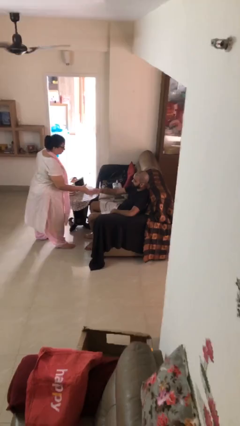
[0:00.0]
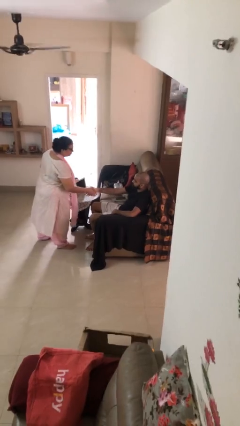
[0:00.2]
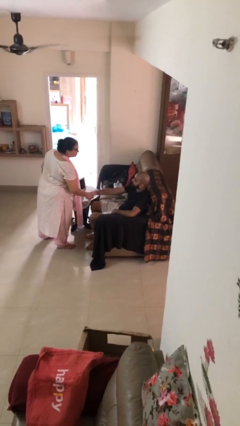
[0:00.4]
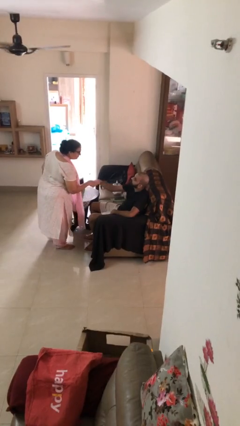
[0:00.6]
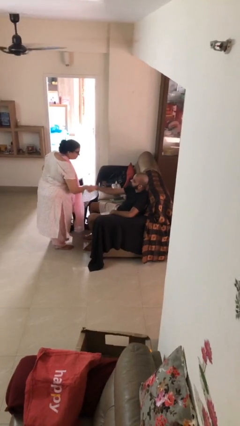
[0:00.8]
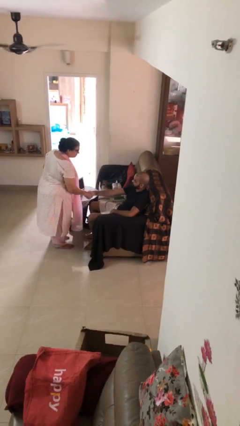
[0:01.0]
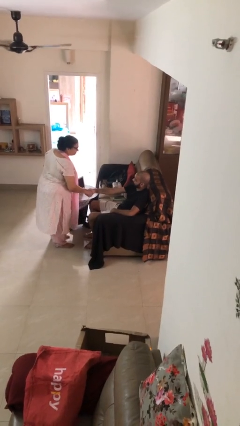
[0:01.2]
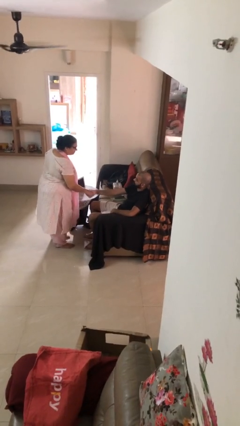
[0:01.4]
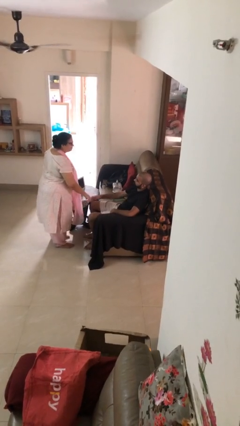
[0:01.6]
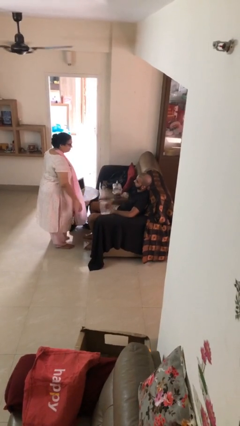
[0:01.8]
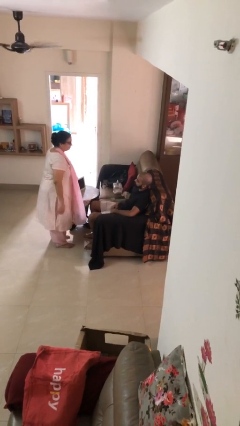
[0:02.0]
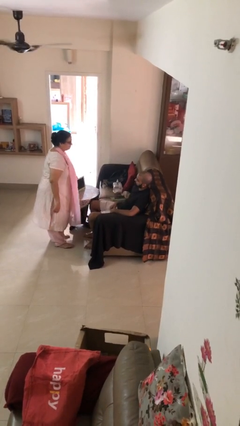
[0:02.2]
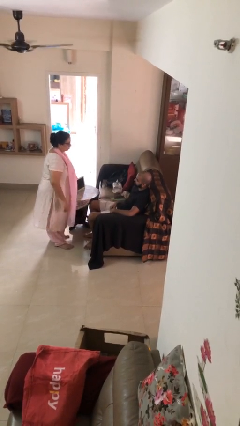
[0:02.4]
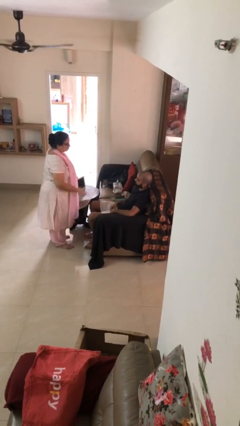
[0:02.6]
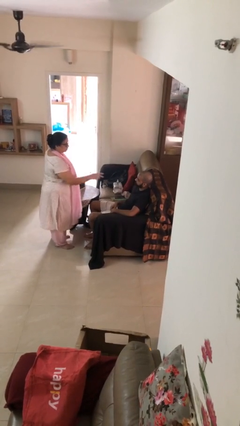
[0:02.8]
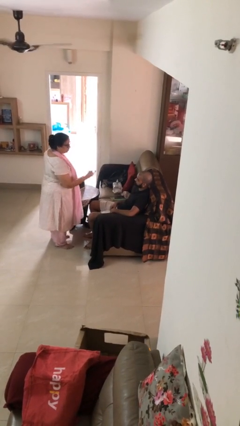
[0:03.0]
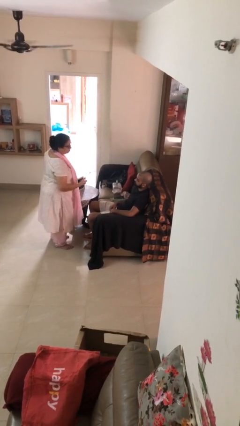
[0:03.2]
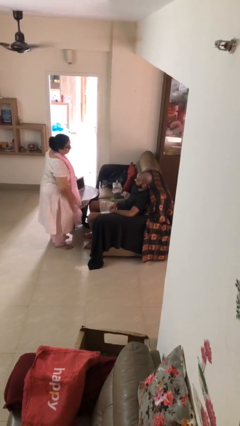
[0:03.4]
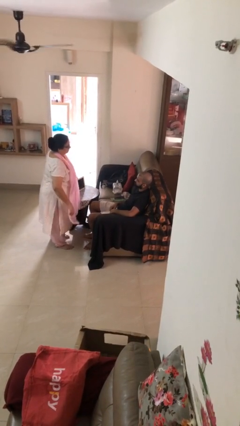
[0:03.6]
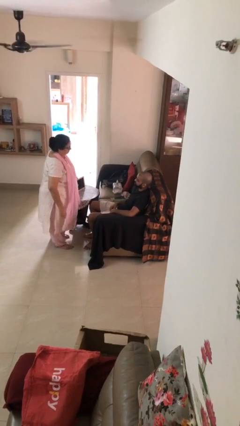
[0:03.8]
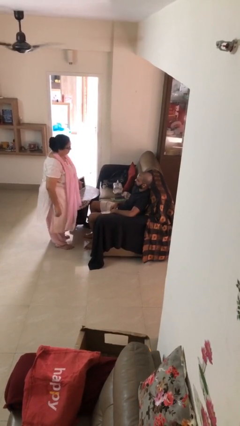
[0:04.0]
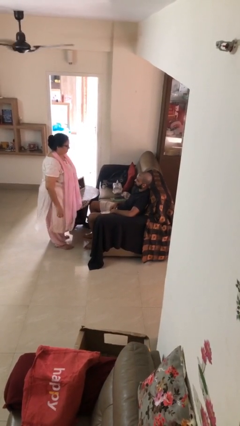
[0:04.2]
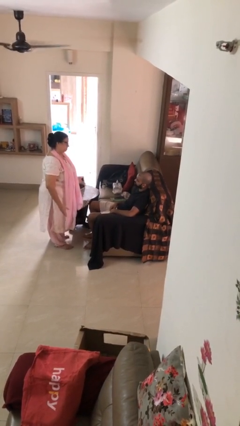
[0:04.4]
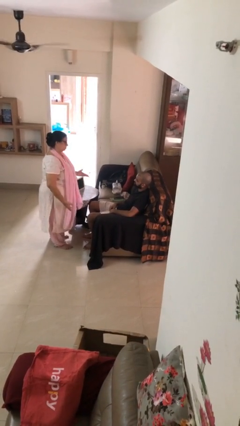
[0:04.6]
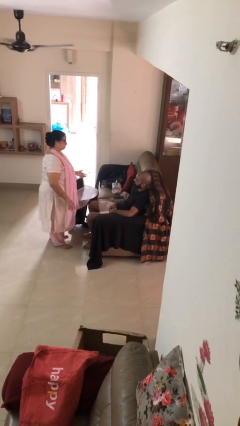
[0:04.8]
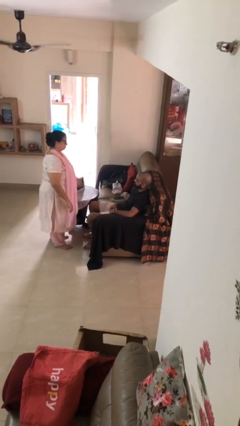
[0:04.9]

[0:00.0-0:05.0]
person shakes hand

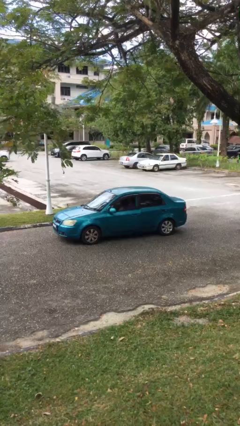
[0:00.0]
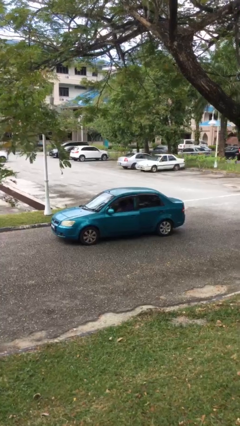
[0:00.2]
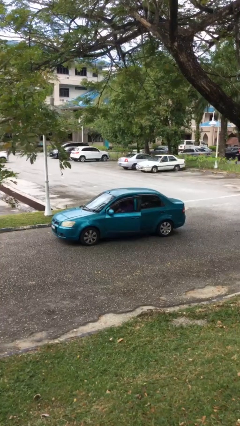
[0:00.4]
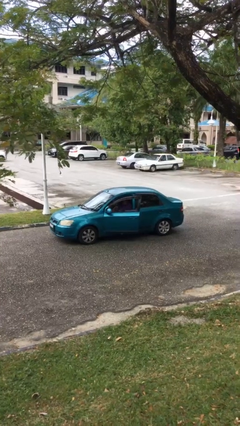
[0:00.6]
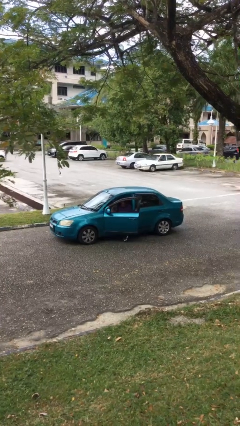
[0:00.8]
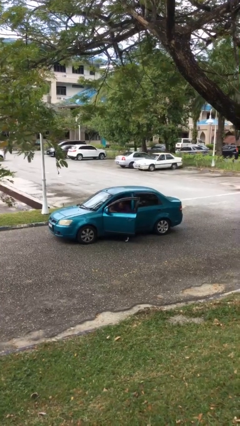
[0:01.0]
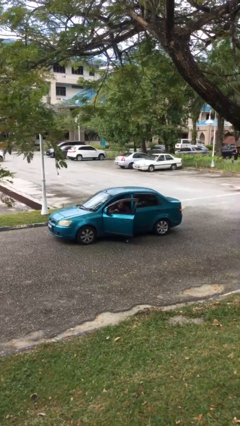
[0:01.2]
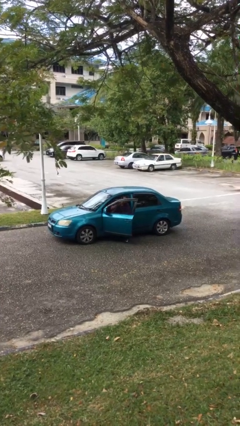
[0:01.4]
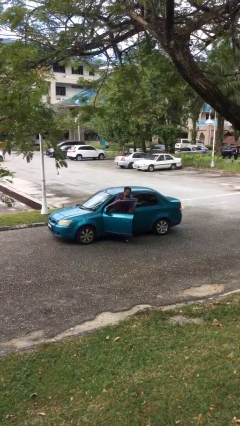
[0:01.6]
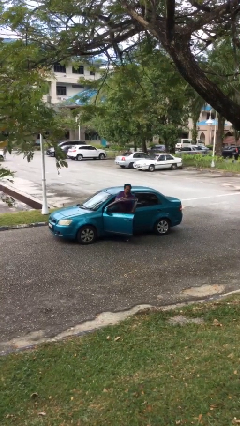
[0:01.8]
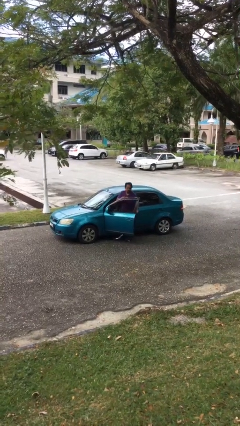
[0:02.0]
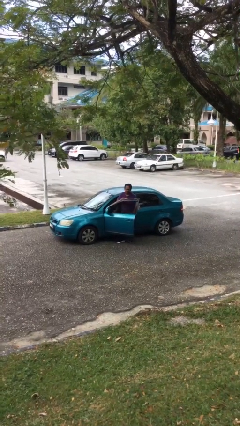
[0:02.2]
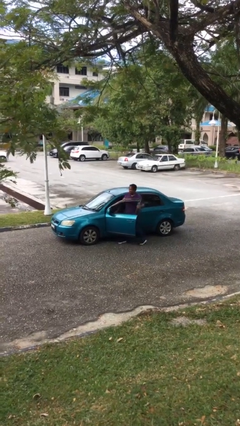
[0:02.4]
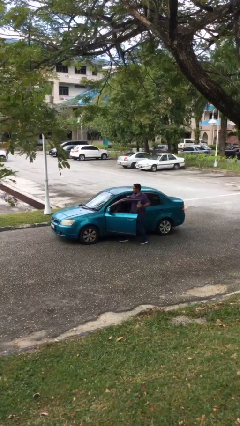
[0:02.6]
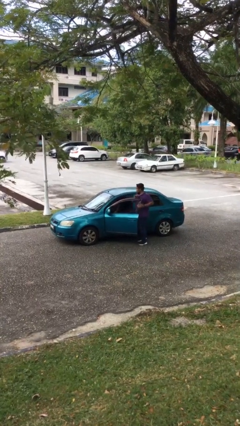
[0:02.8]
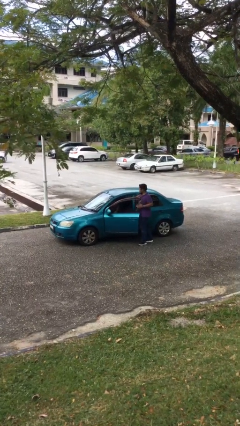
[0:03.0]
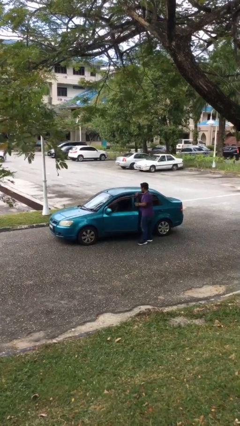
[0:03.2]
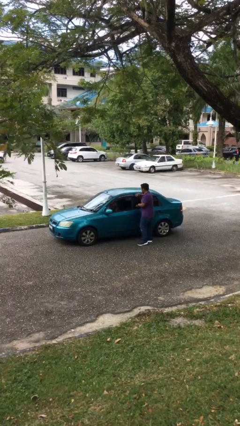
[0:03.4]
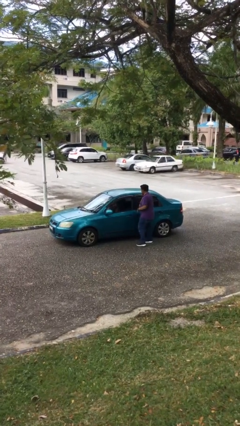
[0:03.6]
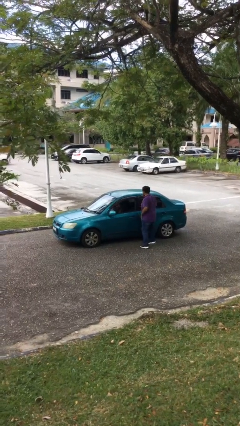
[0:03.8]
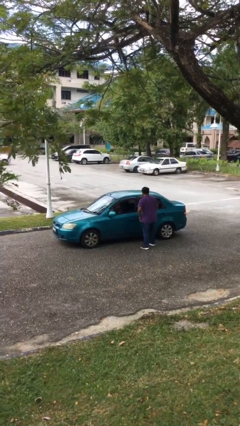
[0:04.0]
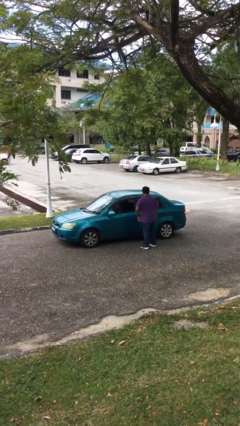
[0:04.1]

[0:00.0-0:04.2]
car drops off person

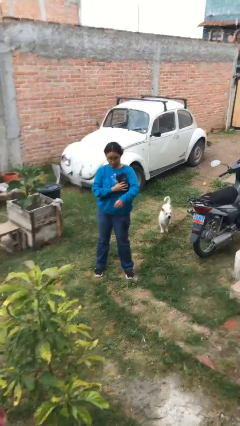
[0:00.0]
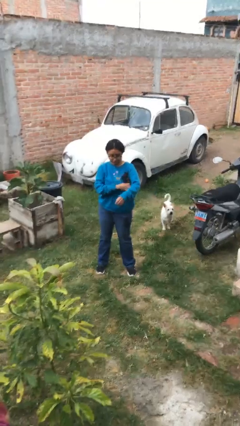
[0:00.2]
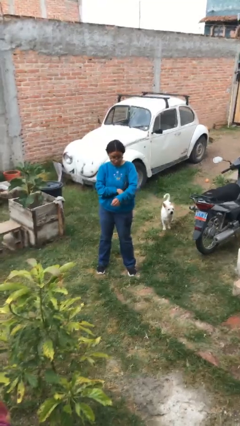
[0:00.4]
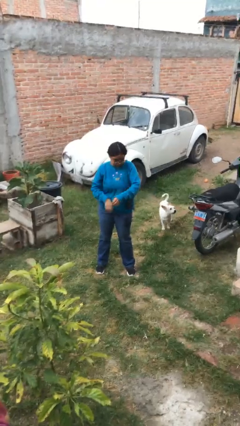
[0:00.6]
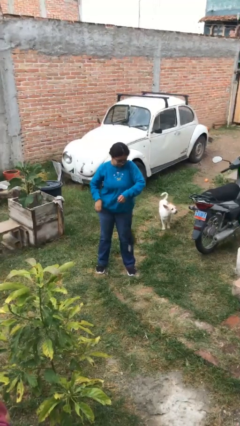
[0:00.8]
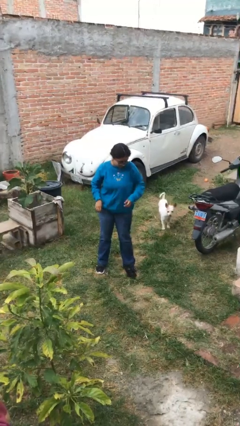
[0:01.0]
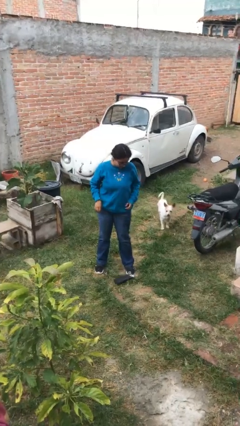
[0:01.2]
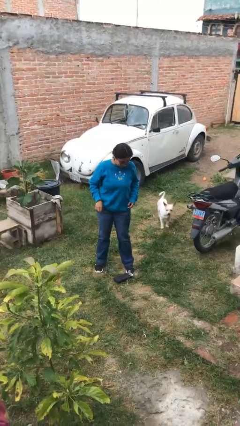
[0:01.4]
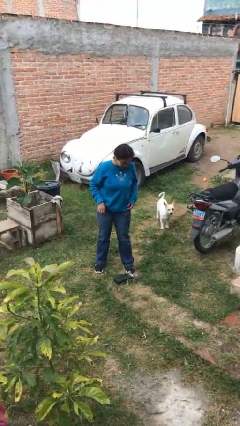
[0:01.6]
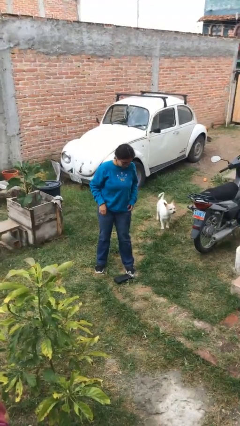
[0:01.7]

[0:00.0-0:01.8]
person drops object

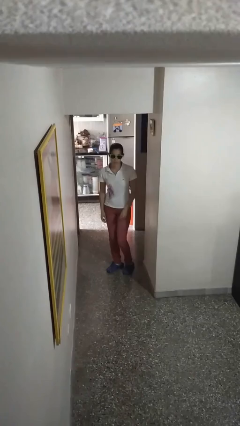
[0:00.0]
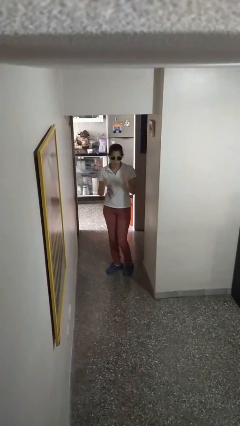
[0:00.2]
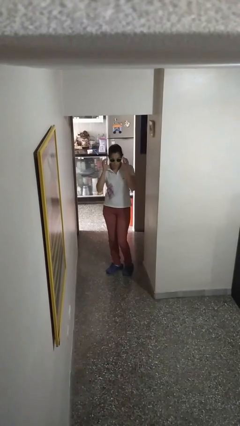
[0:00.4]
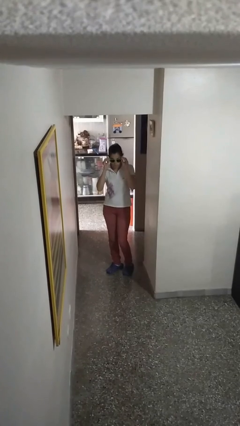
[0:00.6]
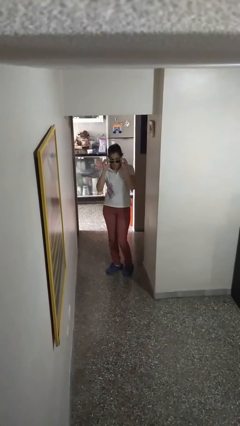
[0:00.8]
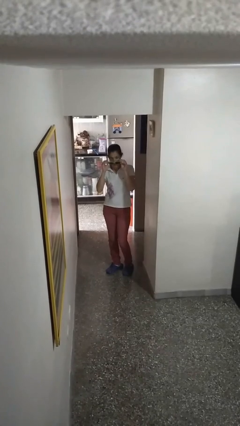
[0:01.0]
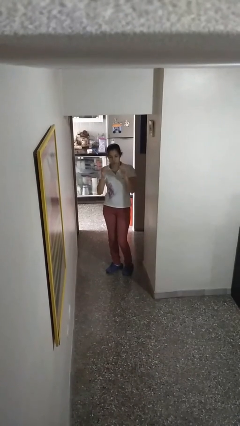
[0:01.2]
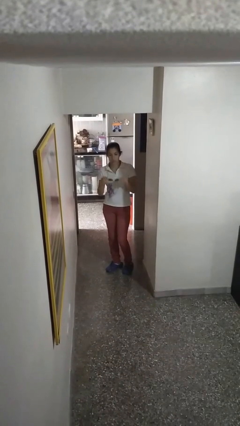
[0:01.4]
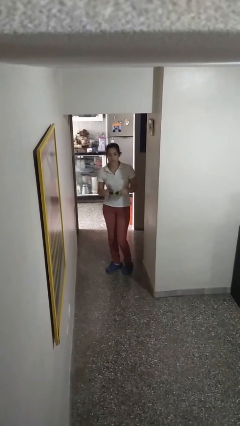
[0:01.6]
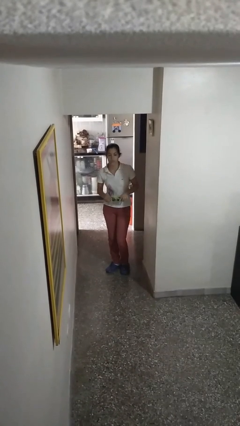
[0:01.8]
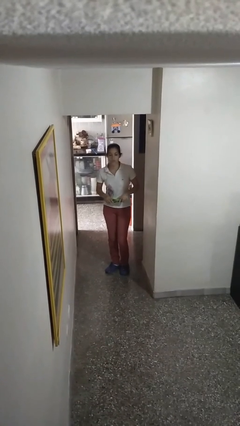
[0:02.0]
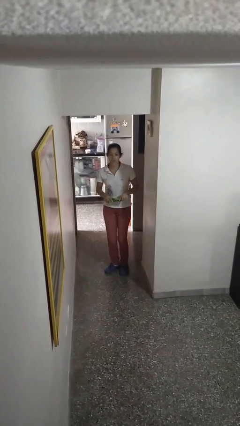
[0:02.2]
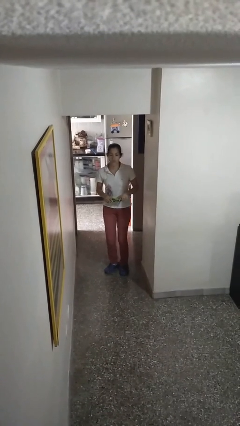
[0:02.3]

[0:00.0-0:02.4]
person takes off sunglasses

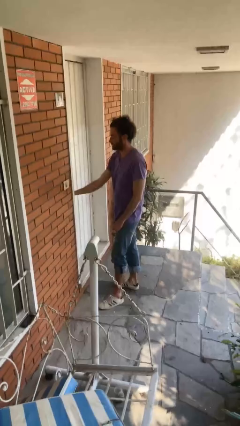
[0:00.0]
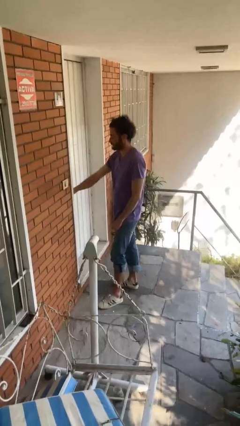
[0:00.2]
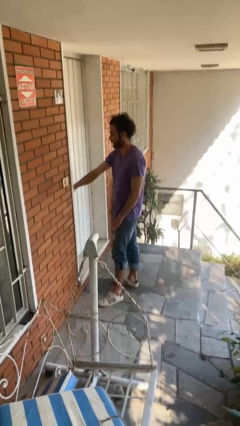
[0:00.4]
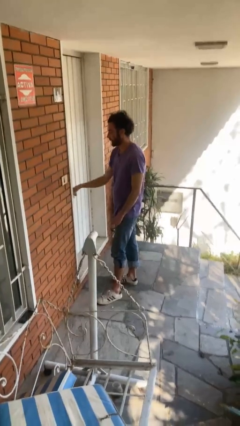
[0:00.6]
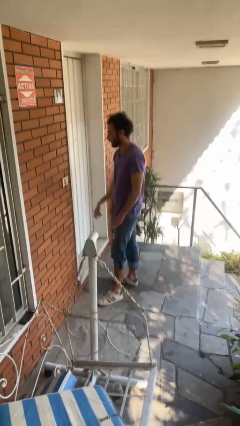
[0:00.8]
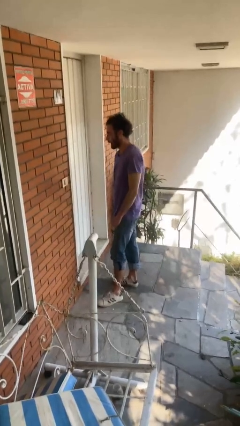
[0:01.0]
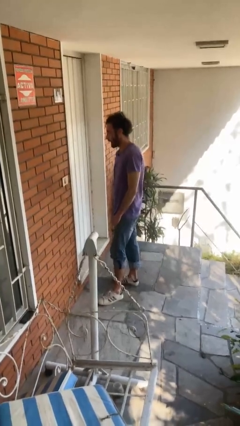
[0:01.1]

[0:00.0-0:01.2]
person locks door with keys

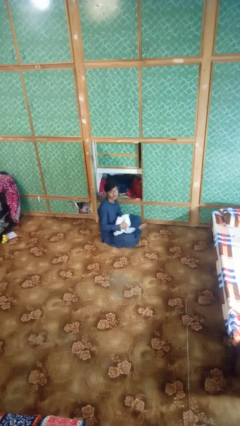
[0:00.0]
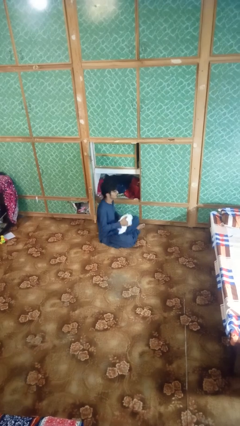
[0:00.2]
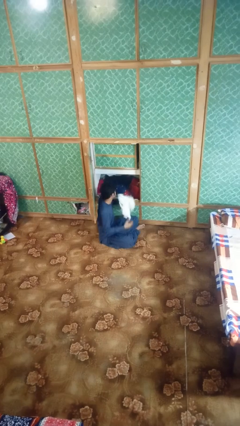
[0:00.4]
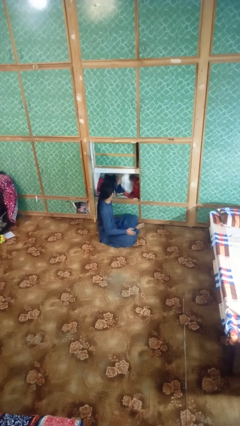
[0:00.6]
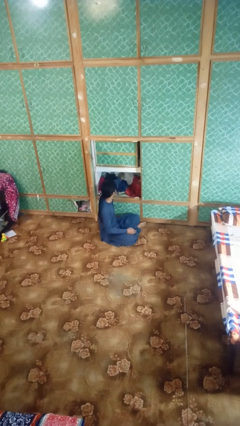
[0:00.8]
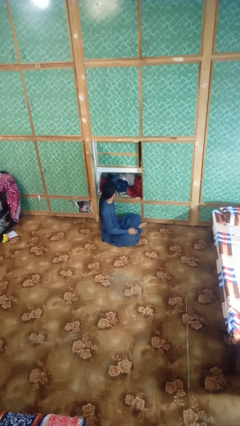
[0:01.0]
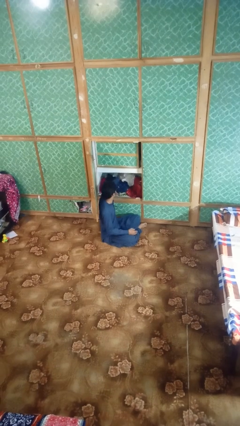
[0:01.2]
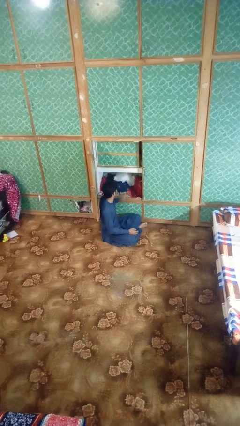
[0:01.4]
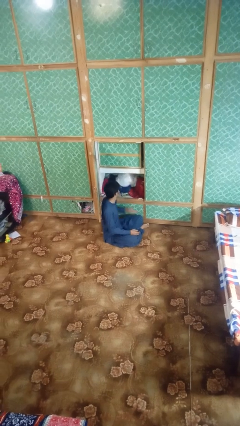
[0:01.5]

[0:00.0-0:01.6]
person puts clothes into dresser

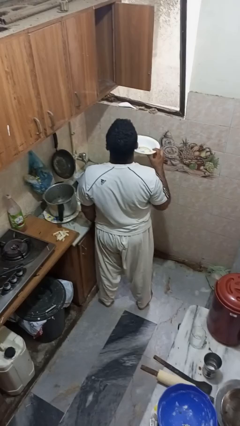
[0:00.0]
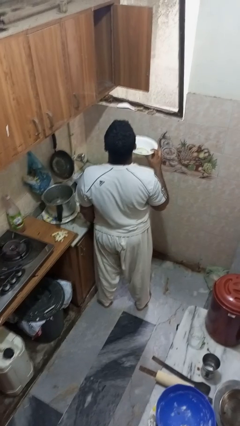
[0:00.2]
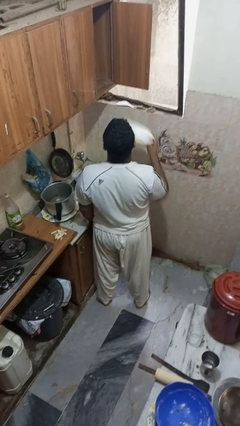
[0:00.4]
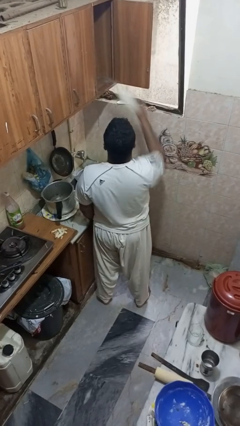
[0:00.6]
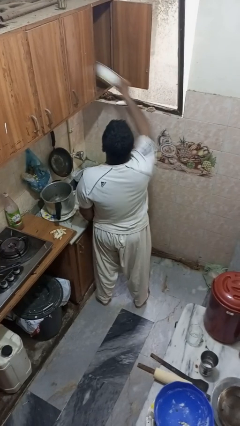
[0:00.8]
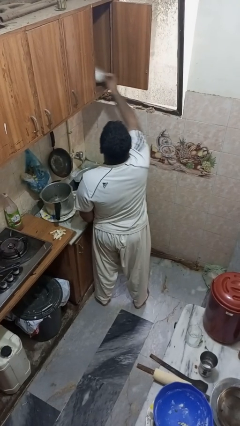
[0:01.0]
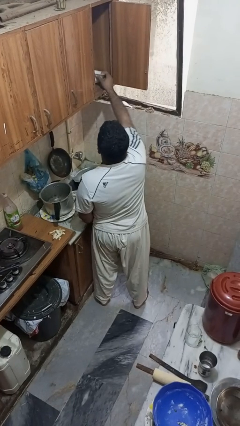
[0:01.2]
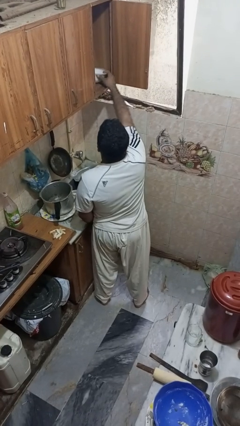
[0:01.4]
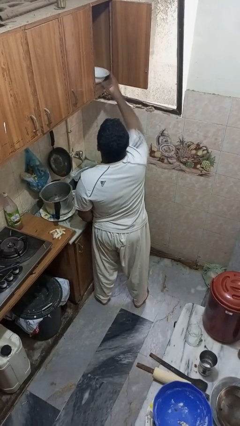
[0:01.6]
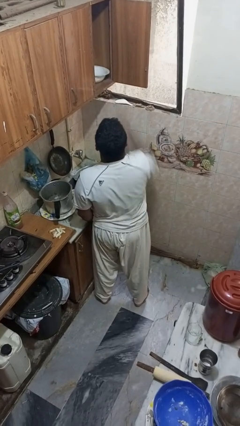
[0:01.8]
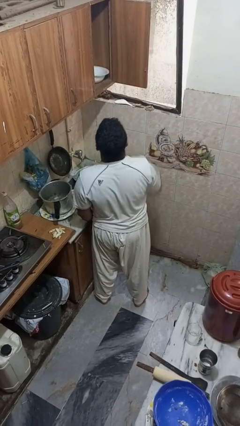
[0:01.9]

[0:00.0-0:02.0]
person puts object in cabinet
